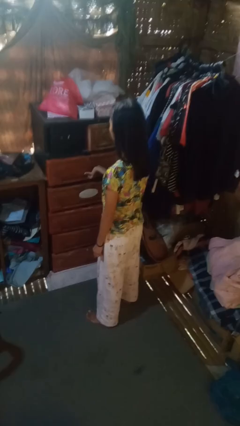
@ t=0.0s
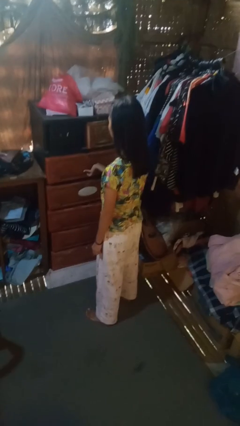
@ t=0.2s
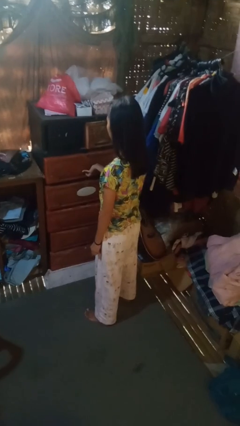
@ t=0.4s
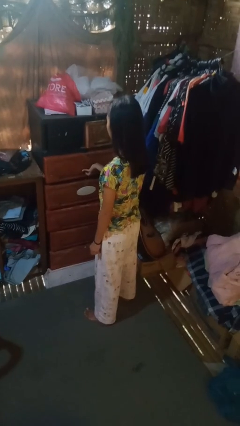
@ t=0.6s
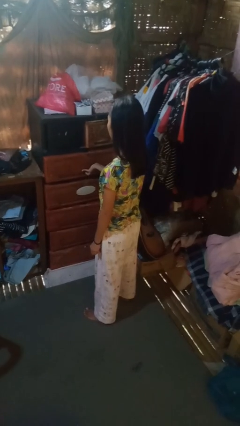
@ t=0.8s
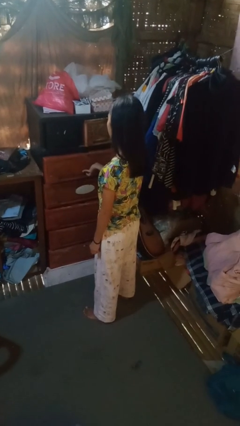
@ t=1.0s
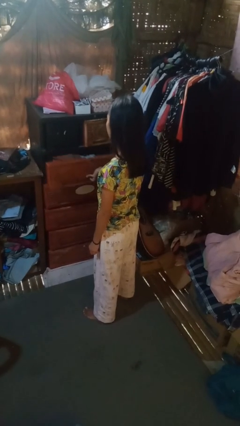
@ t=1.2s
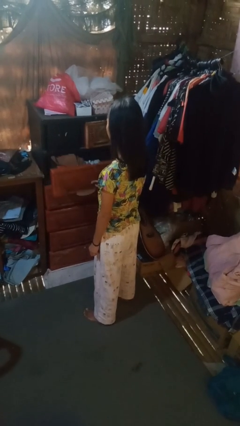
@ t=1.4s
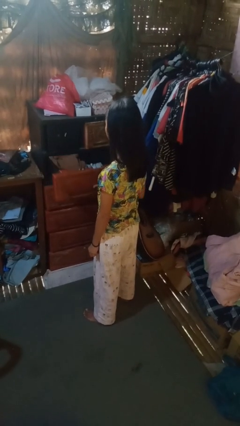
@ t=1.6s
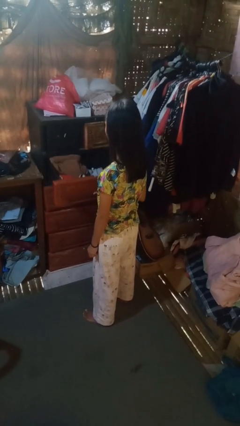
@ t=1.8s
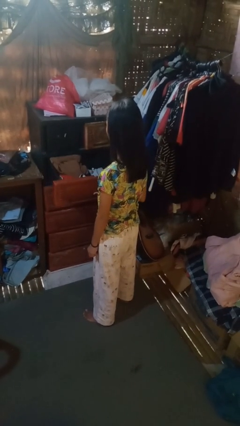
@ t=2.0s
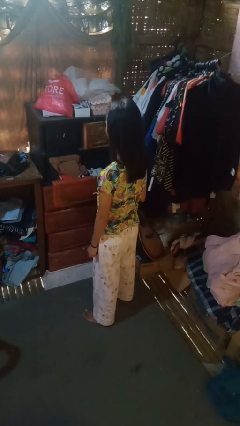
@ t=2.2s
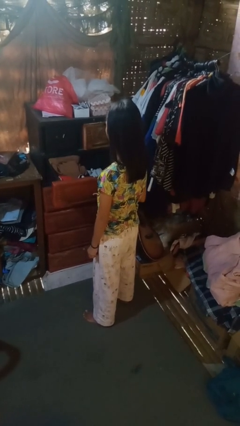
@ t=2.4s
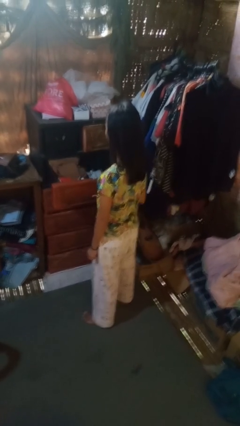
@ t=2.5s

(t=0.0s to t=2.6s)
person opens dresser drawer

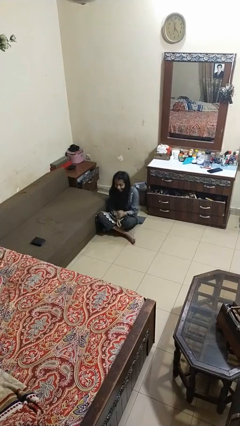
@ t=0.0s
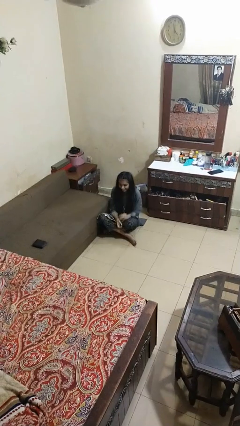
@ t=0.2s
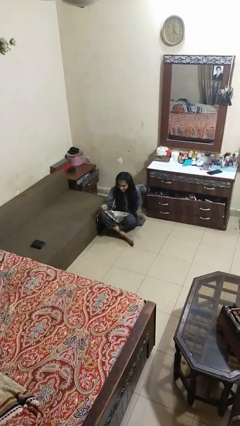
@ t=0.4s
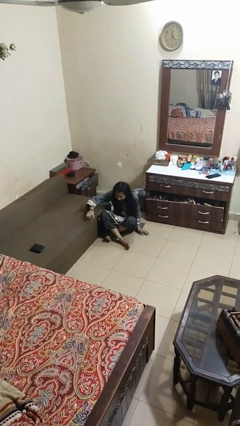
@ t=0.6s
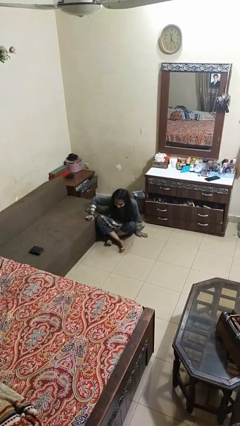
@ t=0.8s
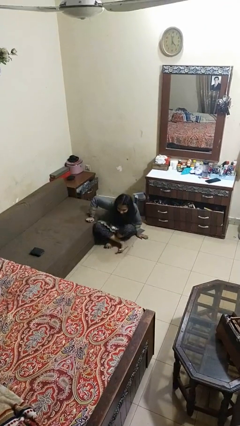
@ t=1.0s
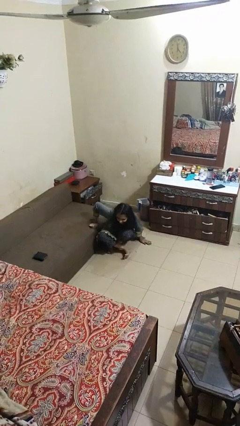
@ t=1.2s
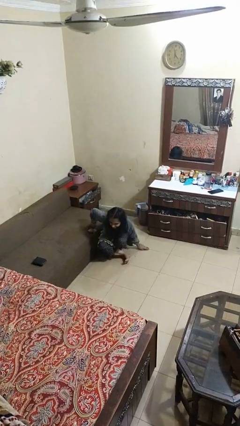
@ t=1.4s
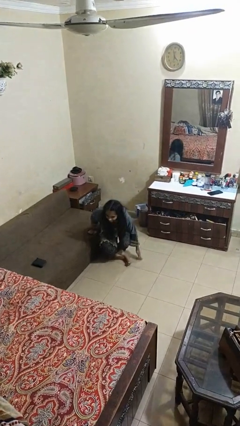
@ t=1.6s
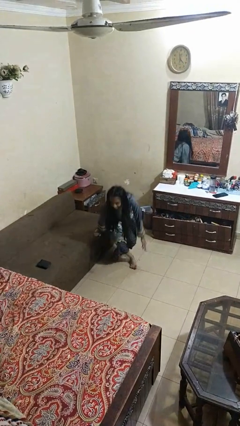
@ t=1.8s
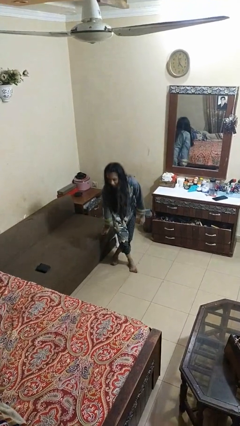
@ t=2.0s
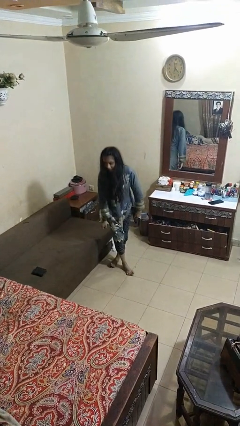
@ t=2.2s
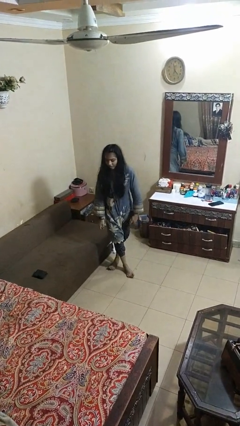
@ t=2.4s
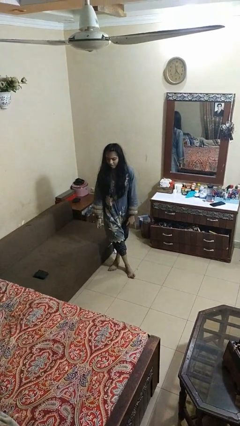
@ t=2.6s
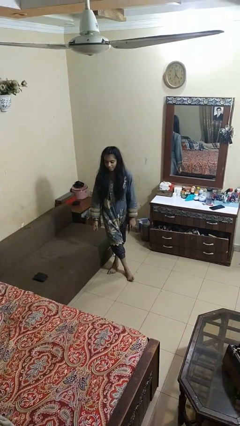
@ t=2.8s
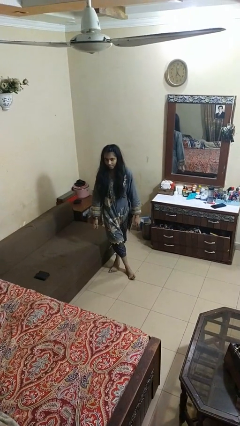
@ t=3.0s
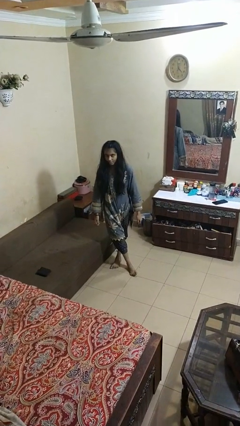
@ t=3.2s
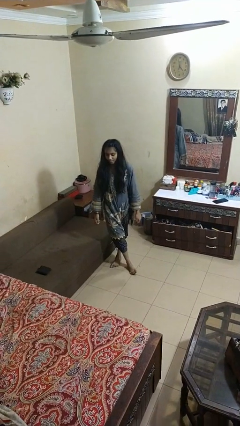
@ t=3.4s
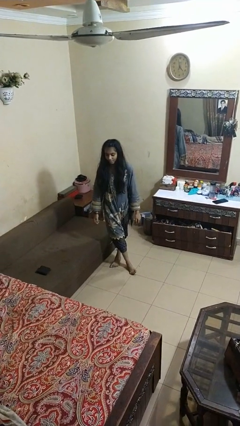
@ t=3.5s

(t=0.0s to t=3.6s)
person stands up from floor

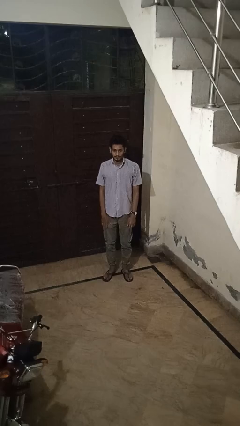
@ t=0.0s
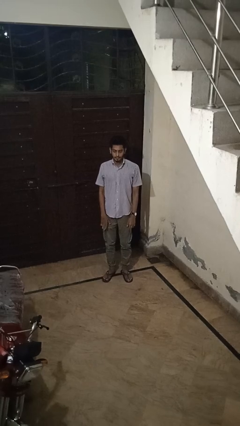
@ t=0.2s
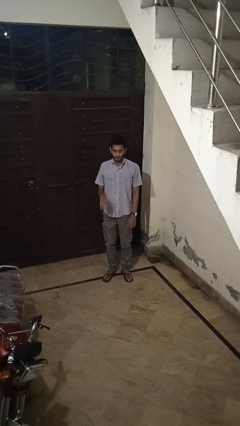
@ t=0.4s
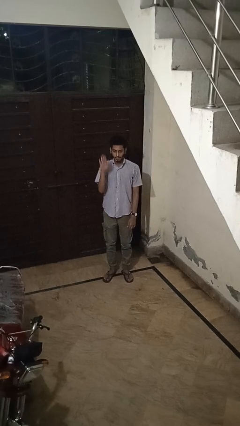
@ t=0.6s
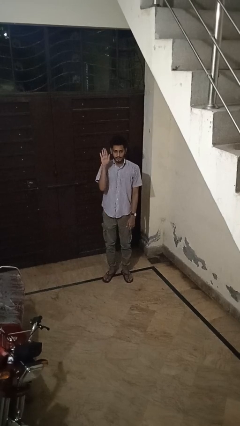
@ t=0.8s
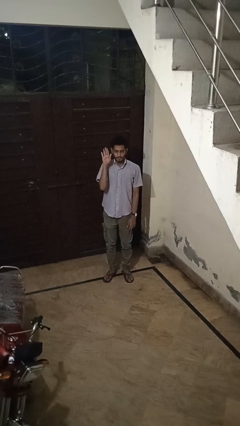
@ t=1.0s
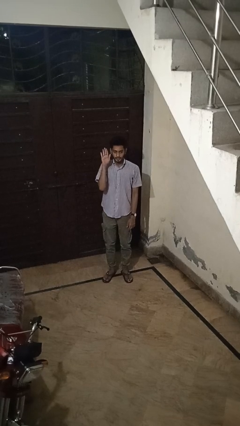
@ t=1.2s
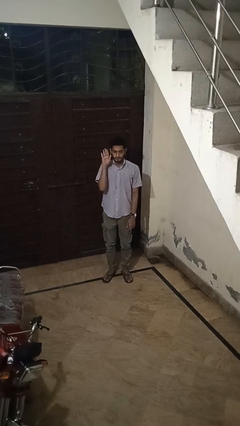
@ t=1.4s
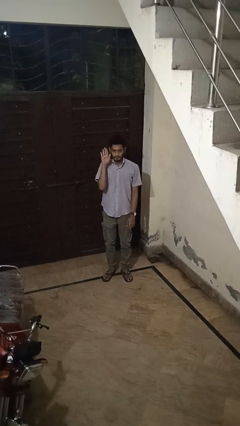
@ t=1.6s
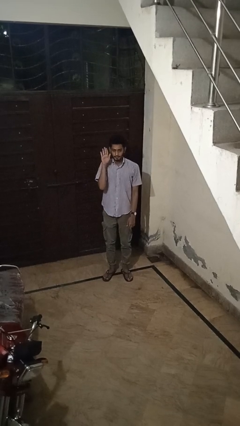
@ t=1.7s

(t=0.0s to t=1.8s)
person gestures raise hand

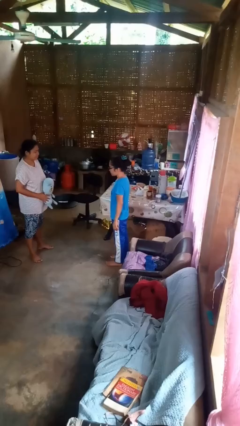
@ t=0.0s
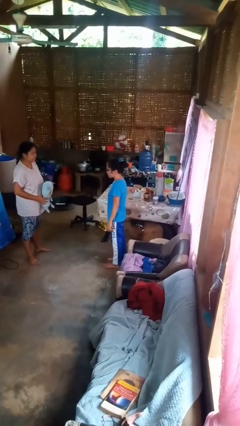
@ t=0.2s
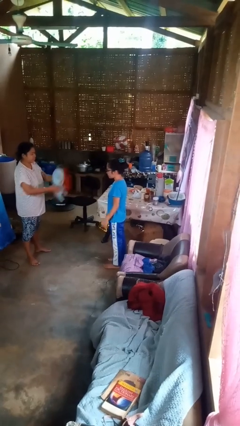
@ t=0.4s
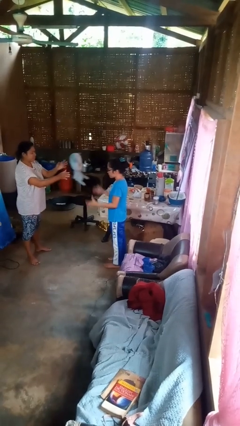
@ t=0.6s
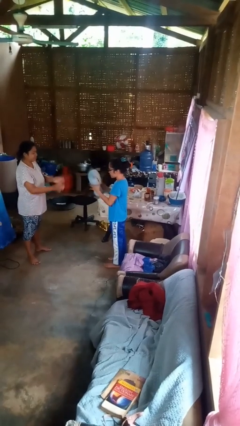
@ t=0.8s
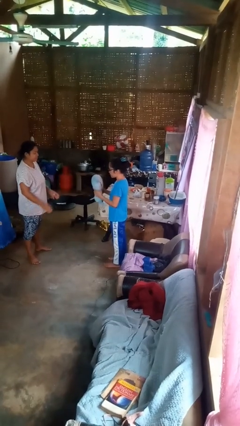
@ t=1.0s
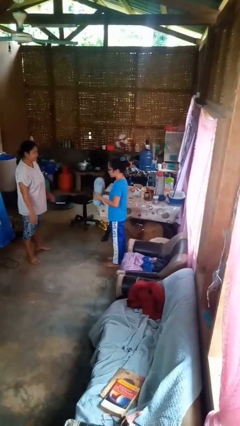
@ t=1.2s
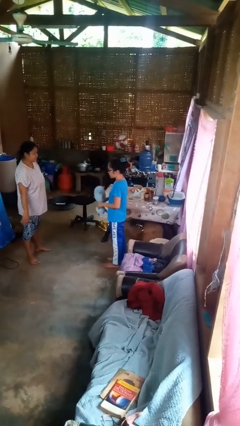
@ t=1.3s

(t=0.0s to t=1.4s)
person catches object from person

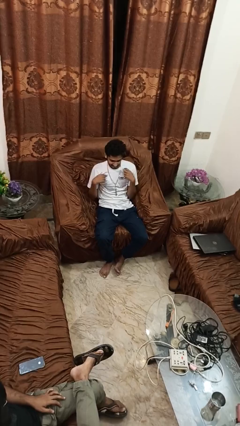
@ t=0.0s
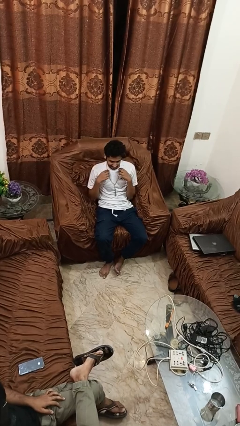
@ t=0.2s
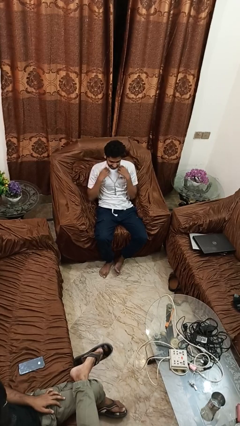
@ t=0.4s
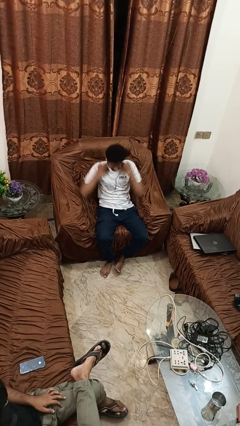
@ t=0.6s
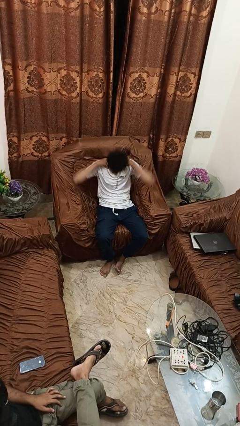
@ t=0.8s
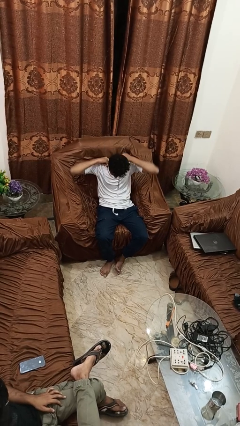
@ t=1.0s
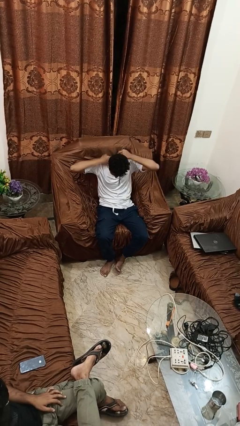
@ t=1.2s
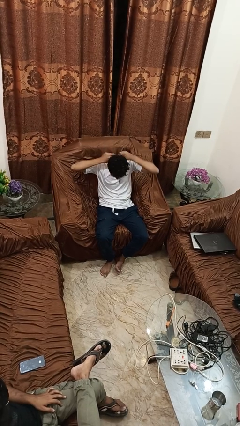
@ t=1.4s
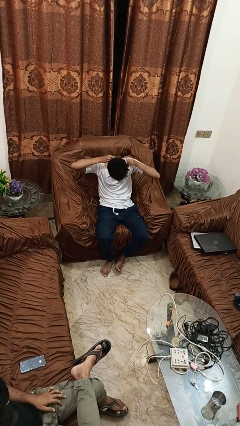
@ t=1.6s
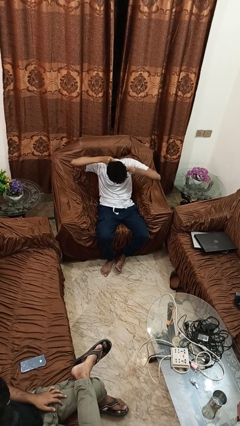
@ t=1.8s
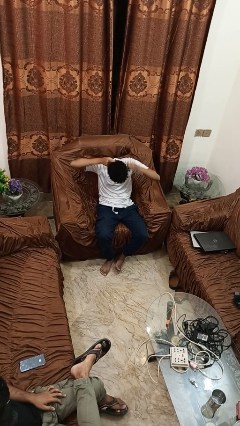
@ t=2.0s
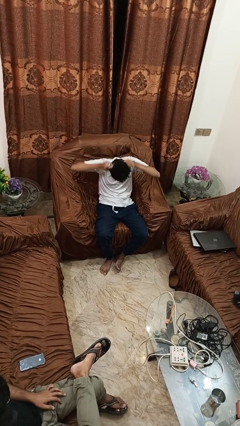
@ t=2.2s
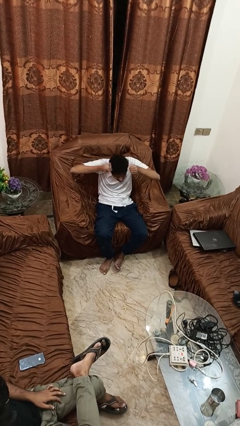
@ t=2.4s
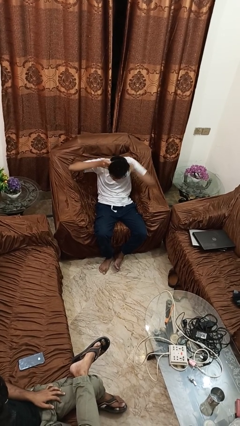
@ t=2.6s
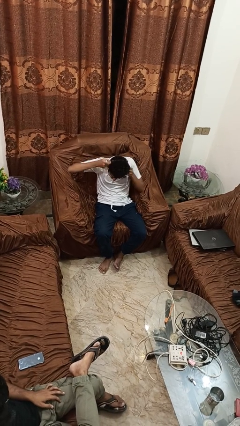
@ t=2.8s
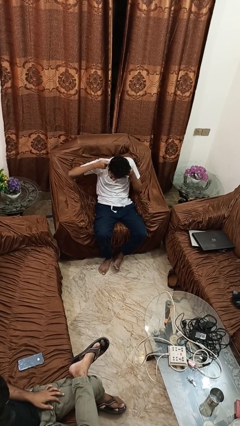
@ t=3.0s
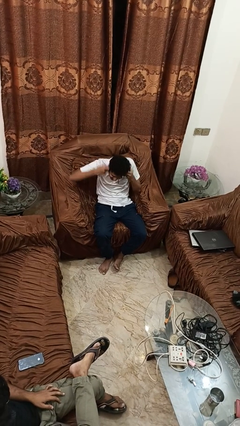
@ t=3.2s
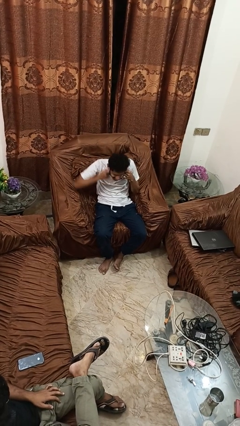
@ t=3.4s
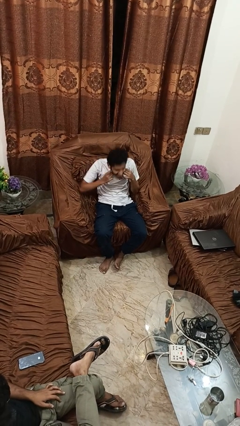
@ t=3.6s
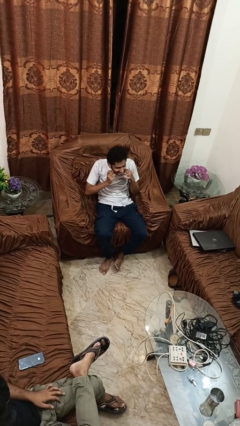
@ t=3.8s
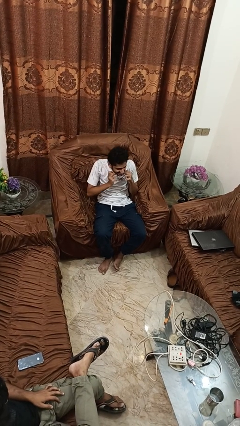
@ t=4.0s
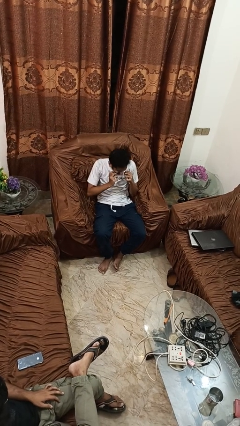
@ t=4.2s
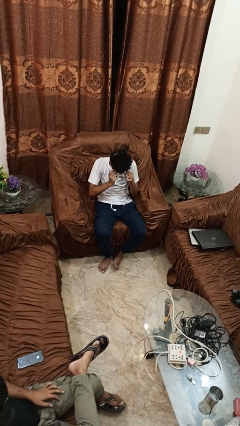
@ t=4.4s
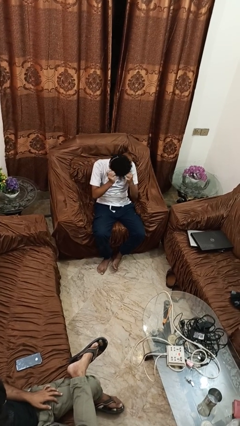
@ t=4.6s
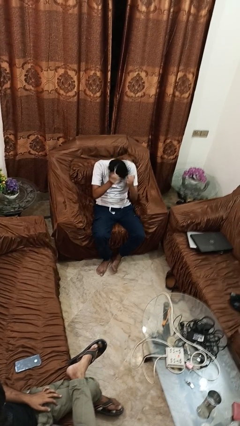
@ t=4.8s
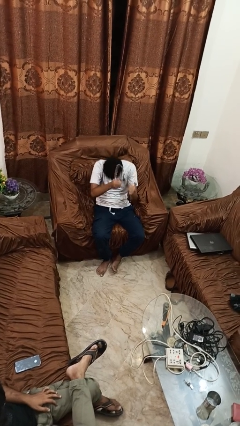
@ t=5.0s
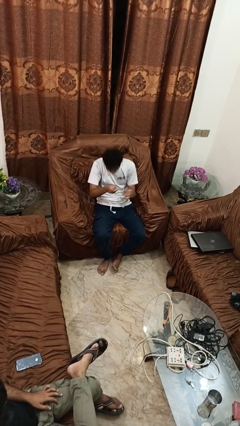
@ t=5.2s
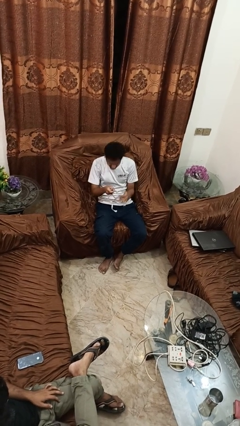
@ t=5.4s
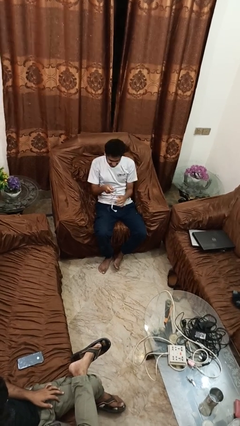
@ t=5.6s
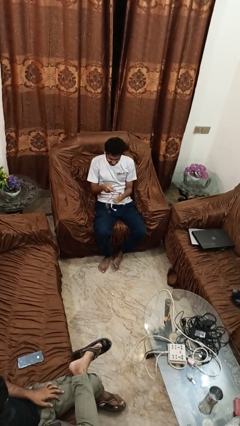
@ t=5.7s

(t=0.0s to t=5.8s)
person takes off necklace

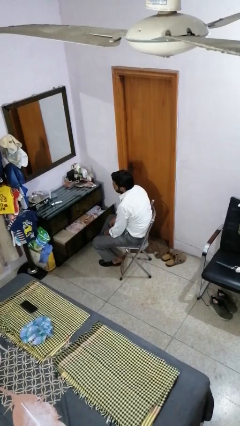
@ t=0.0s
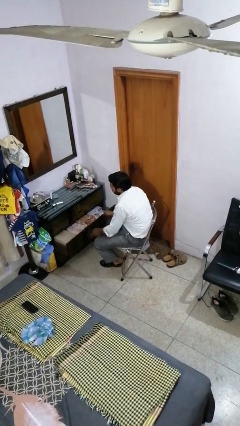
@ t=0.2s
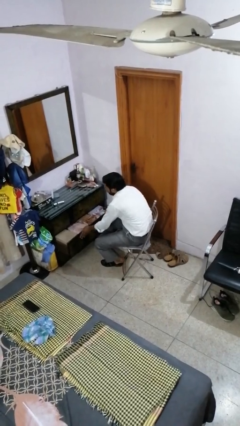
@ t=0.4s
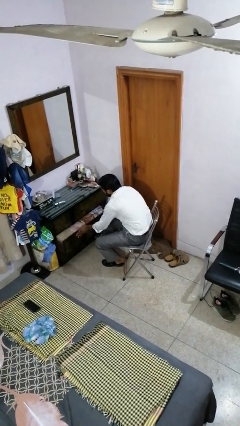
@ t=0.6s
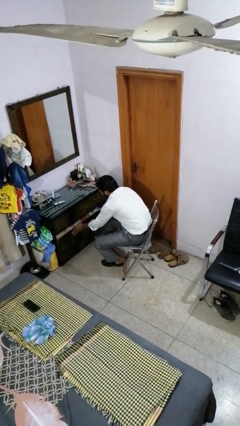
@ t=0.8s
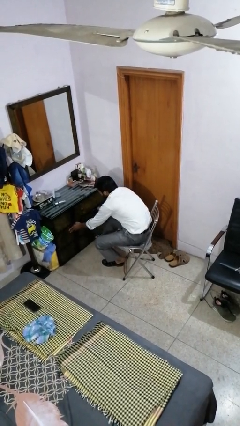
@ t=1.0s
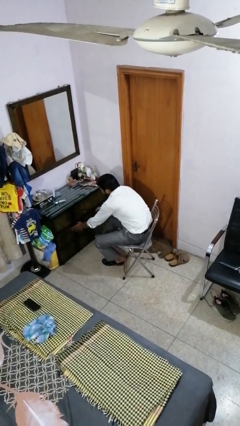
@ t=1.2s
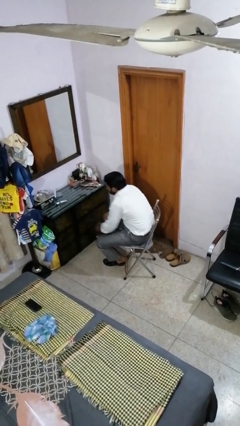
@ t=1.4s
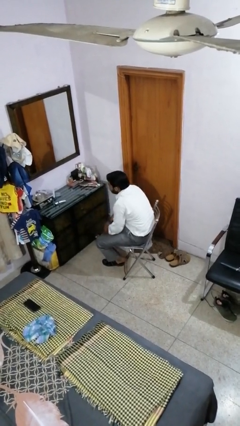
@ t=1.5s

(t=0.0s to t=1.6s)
person closes dresser drawer

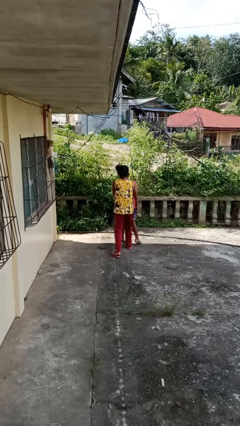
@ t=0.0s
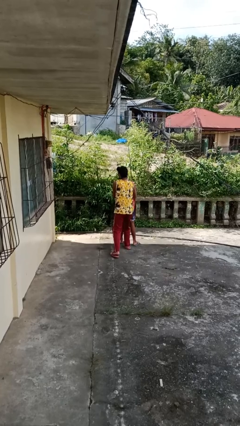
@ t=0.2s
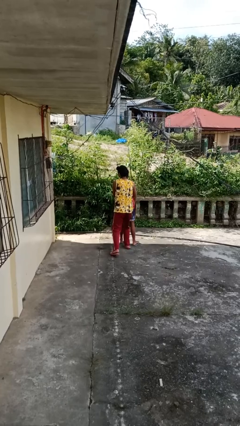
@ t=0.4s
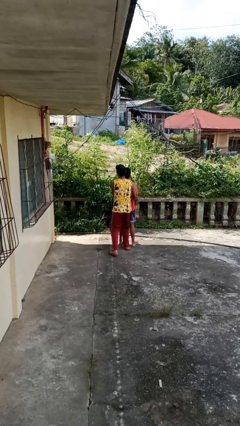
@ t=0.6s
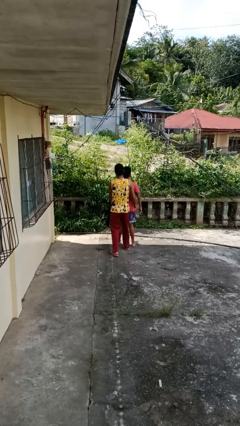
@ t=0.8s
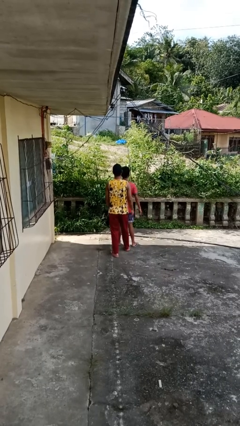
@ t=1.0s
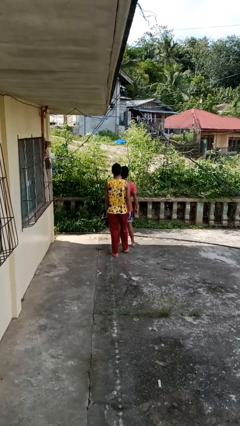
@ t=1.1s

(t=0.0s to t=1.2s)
person puts down person
